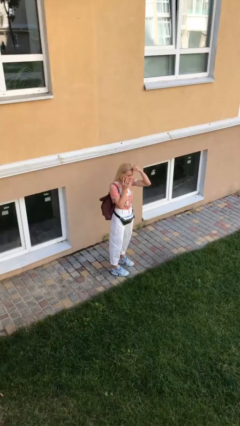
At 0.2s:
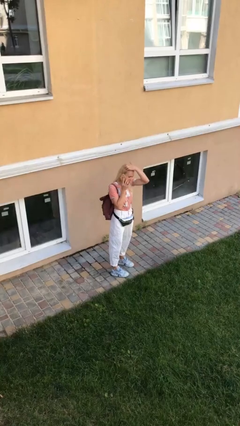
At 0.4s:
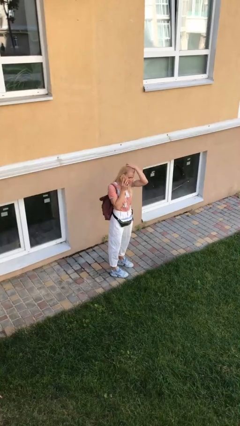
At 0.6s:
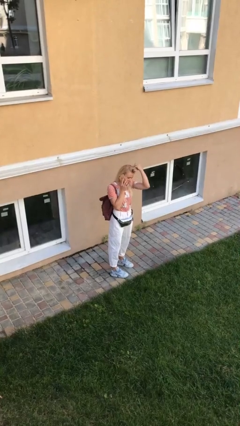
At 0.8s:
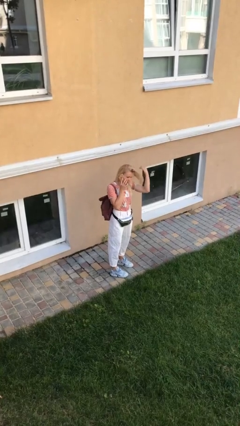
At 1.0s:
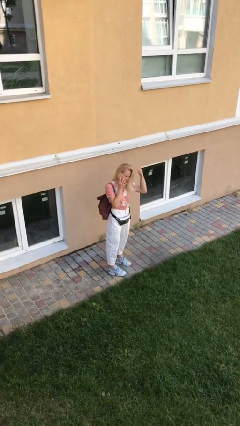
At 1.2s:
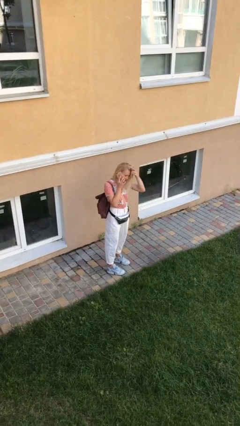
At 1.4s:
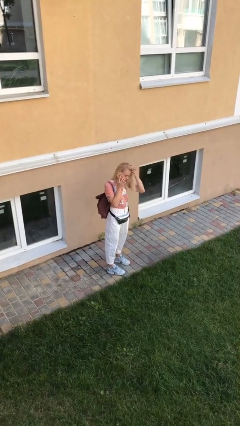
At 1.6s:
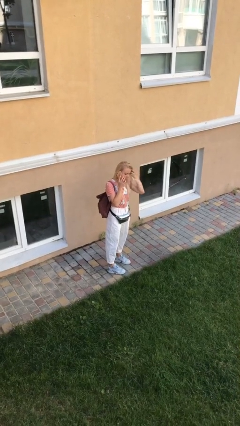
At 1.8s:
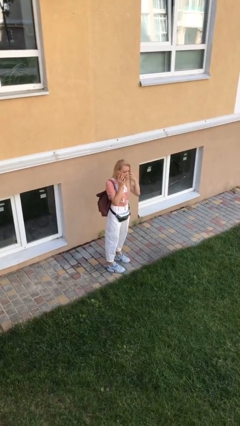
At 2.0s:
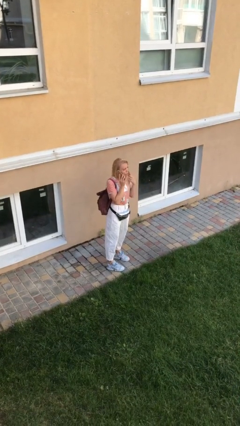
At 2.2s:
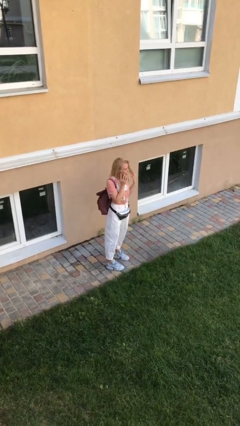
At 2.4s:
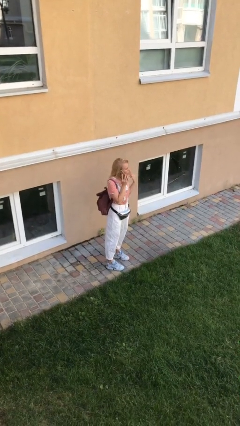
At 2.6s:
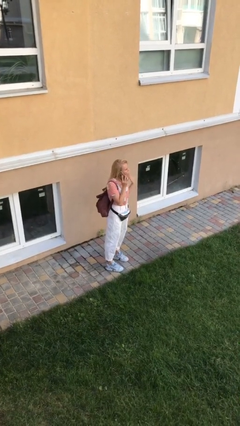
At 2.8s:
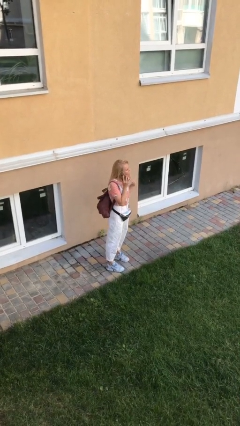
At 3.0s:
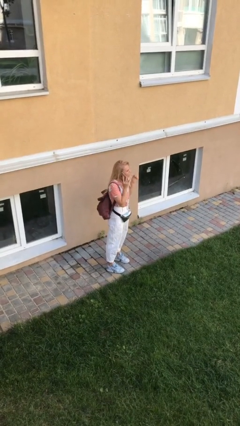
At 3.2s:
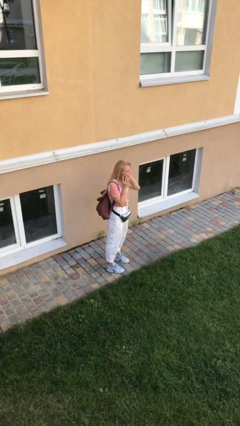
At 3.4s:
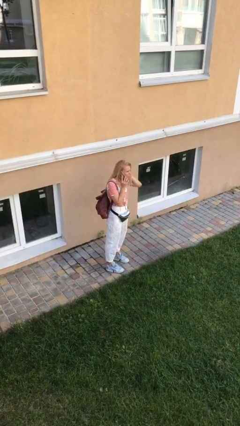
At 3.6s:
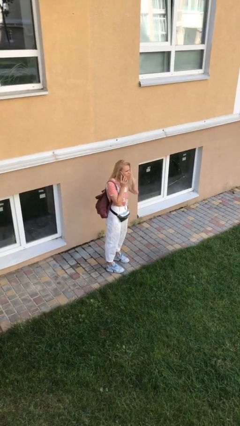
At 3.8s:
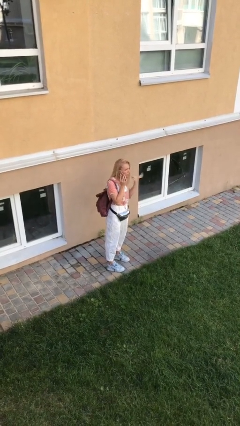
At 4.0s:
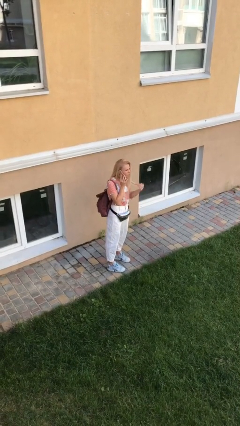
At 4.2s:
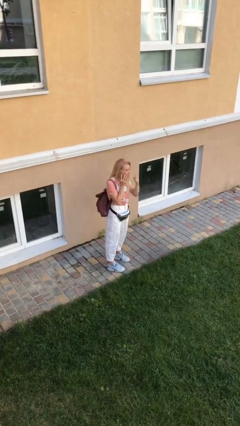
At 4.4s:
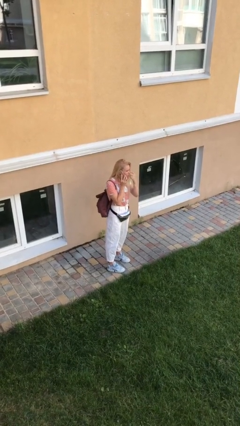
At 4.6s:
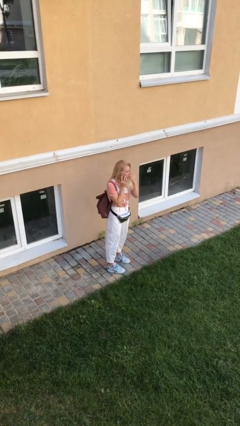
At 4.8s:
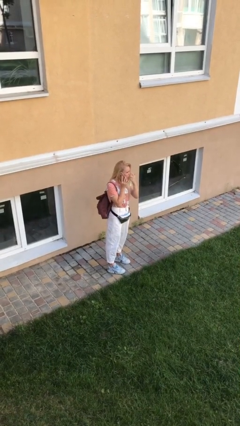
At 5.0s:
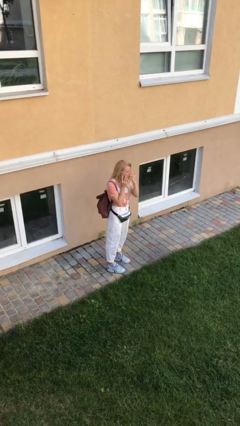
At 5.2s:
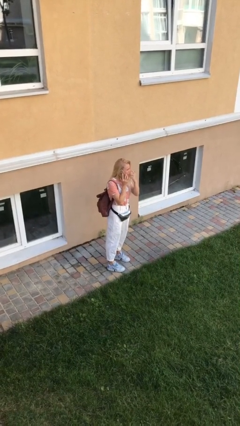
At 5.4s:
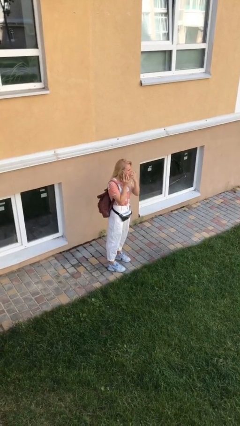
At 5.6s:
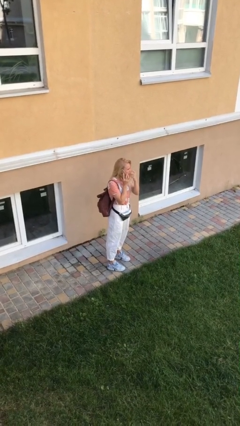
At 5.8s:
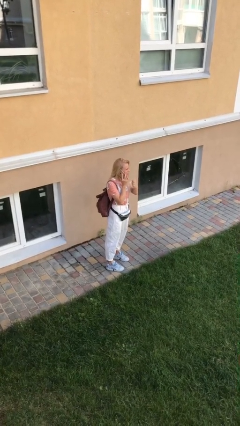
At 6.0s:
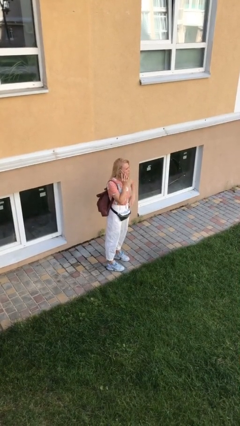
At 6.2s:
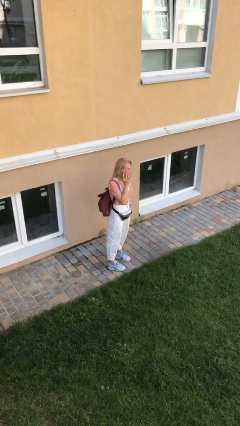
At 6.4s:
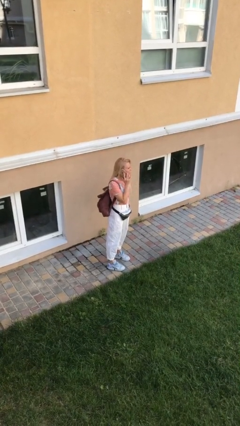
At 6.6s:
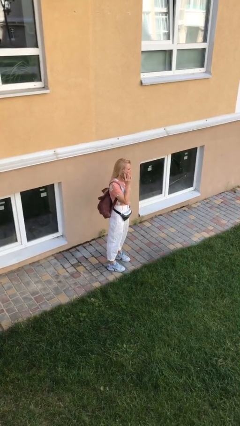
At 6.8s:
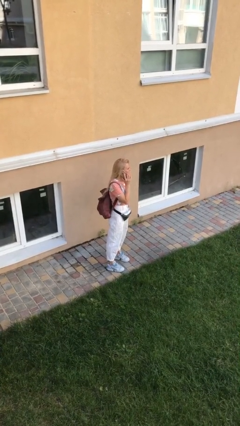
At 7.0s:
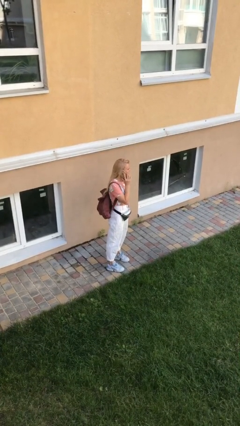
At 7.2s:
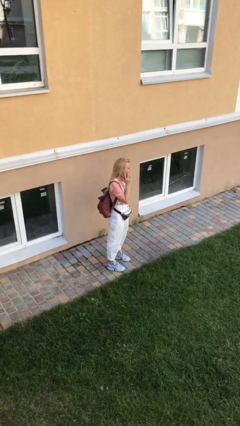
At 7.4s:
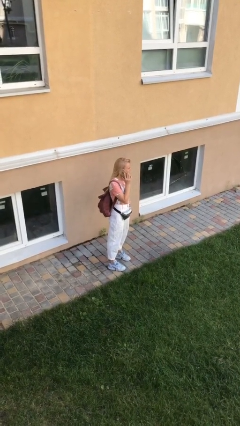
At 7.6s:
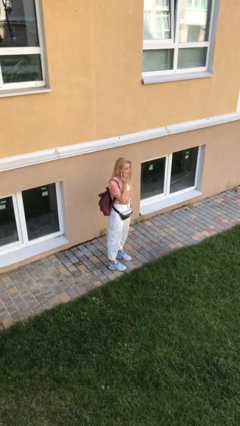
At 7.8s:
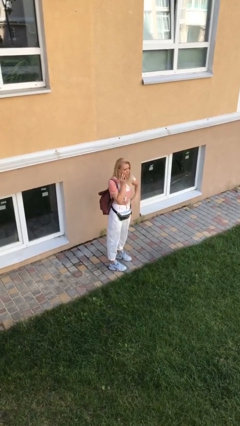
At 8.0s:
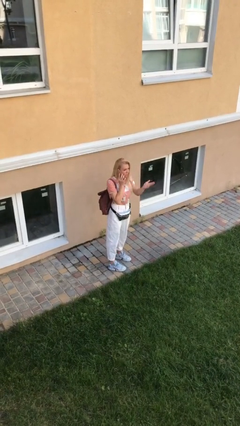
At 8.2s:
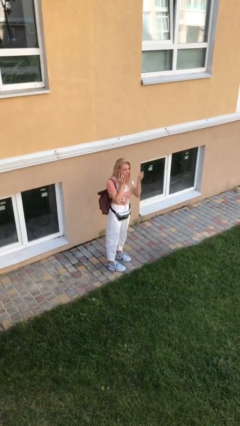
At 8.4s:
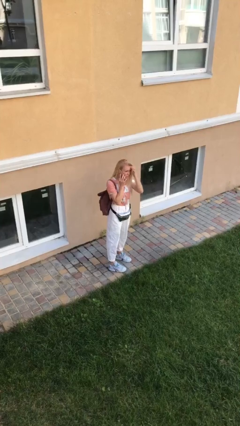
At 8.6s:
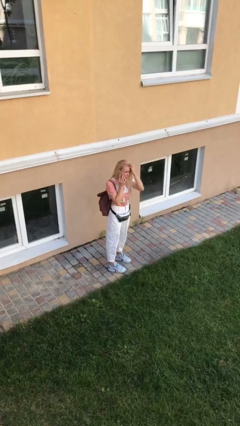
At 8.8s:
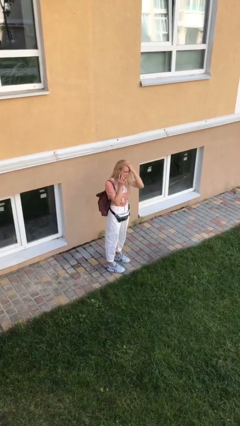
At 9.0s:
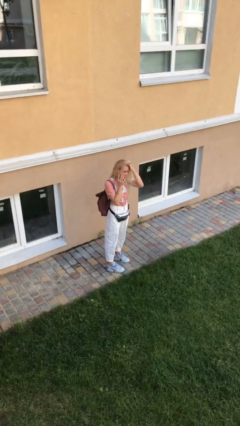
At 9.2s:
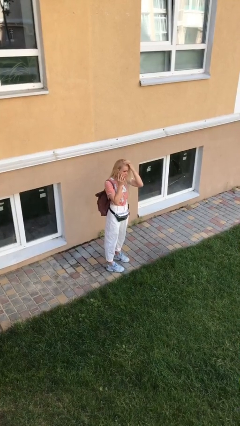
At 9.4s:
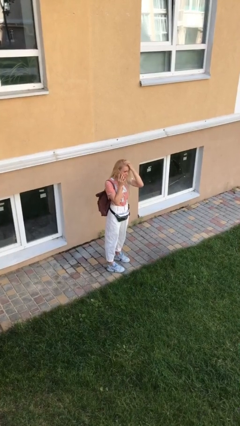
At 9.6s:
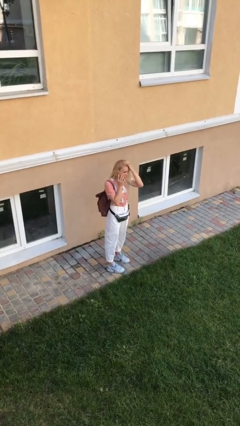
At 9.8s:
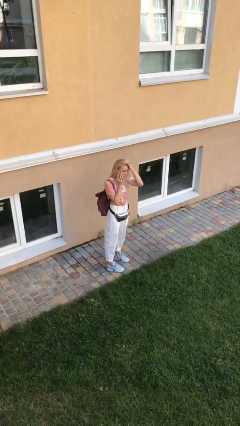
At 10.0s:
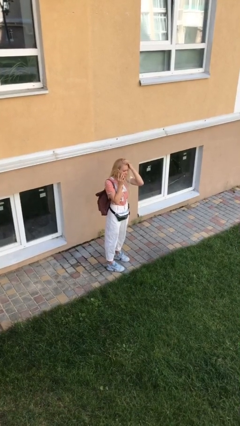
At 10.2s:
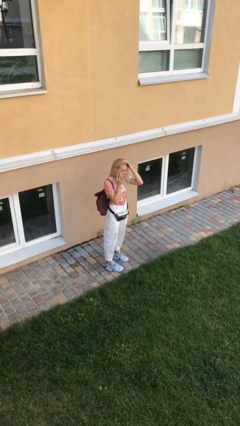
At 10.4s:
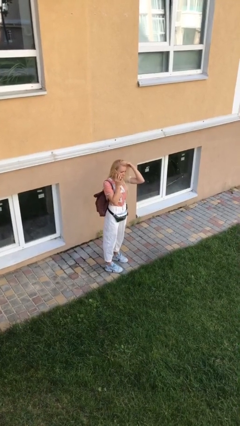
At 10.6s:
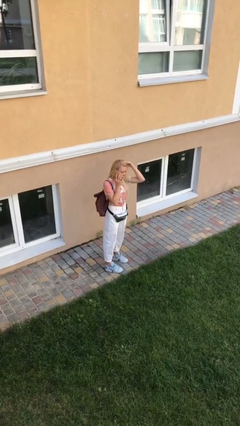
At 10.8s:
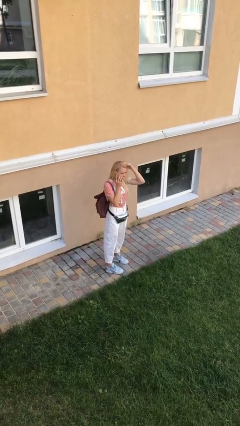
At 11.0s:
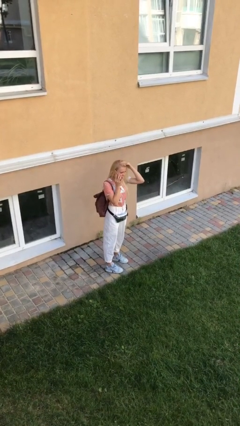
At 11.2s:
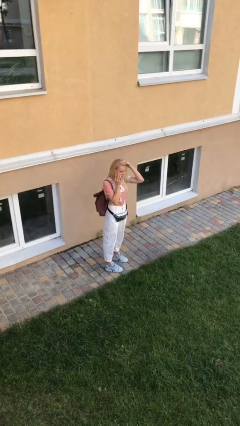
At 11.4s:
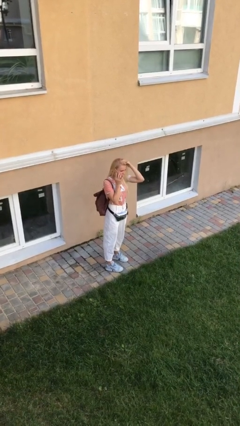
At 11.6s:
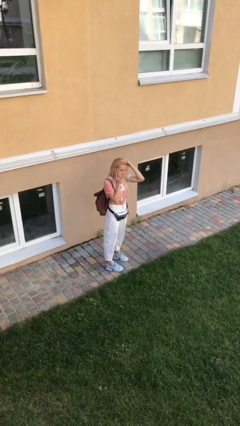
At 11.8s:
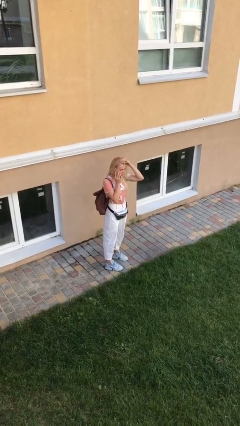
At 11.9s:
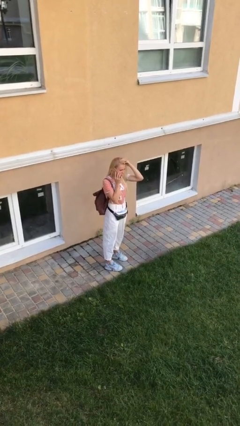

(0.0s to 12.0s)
person talks on phone

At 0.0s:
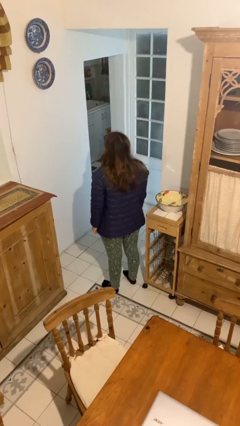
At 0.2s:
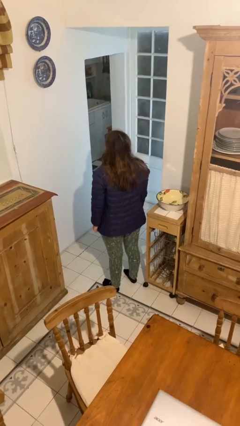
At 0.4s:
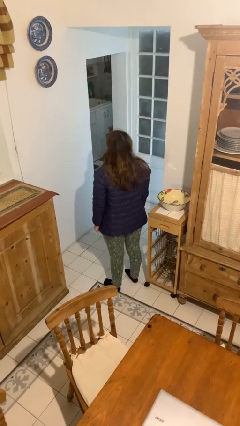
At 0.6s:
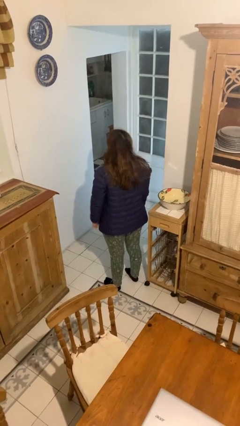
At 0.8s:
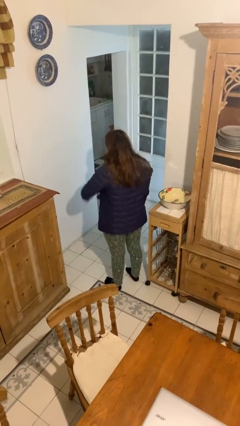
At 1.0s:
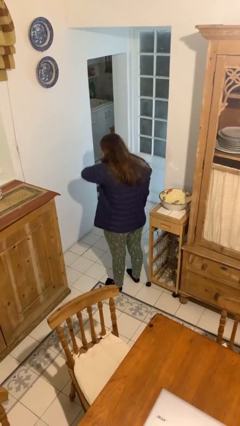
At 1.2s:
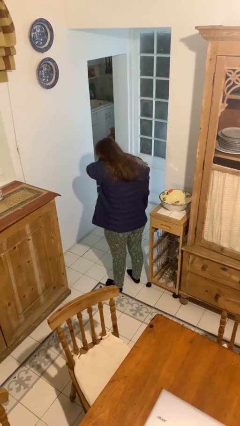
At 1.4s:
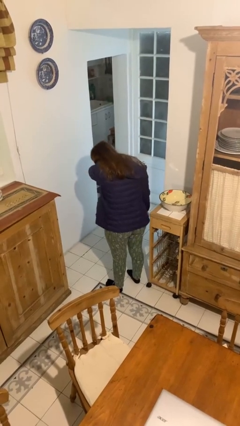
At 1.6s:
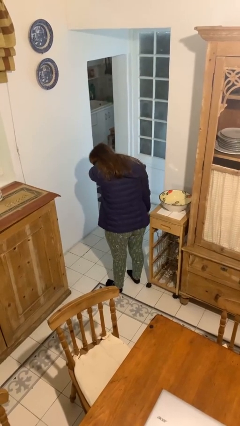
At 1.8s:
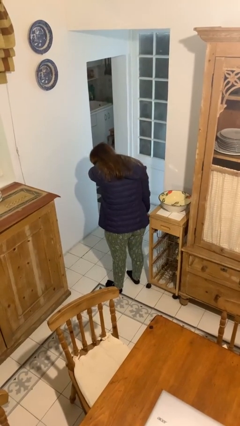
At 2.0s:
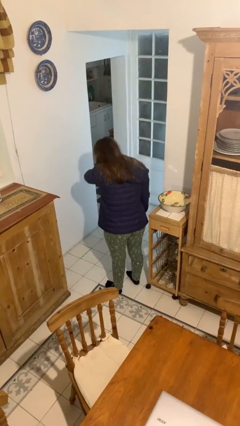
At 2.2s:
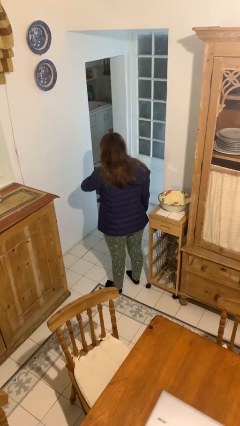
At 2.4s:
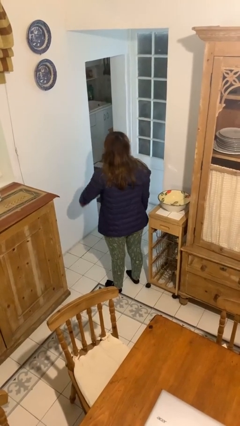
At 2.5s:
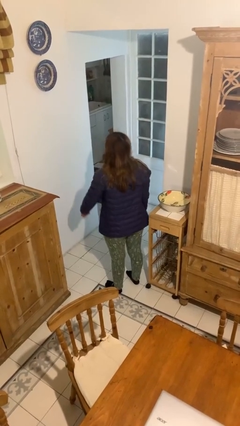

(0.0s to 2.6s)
person sneezes into arm

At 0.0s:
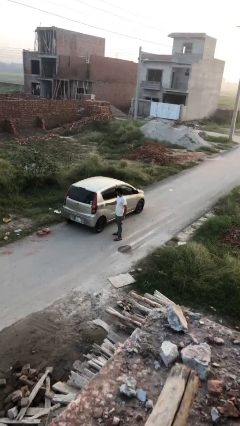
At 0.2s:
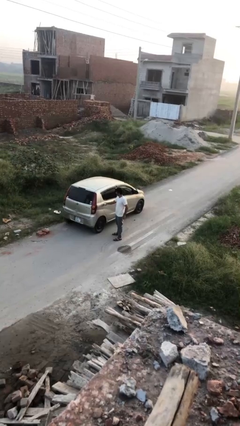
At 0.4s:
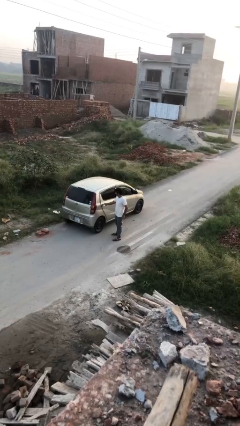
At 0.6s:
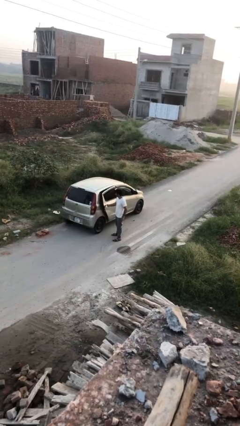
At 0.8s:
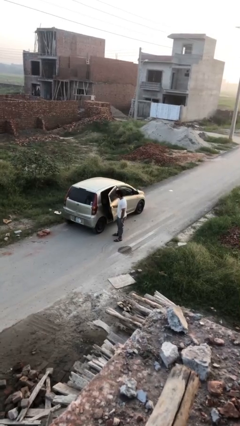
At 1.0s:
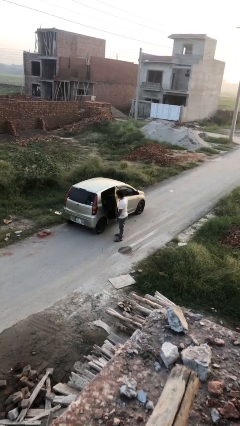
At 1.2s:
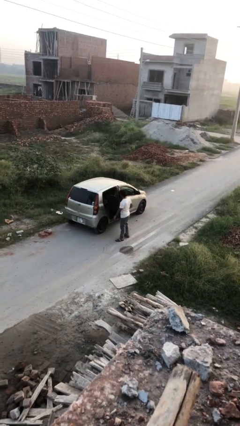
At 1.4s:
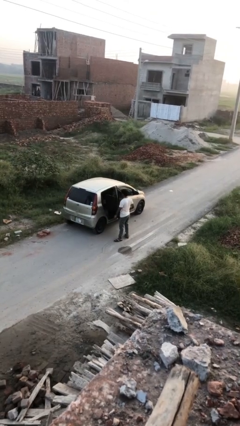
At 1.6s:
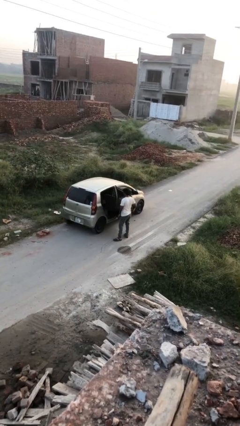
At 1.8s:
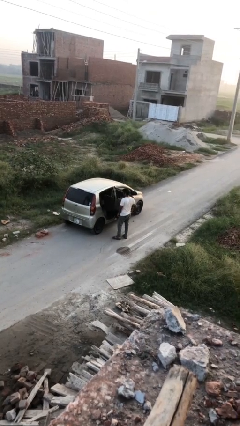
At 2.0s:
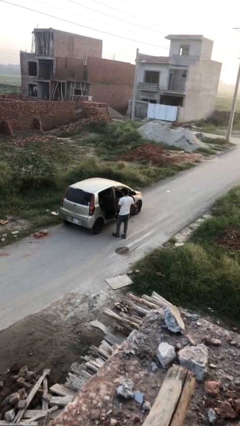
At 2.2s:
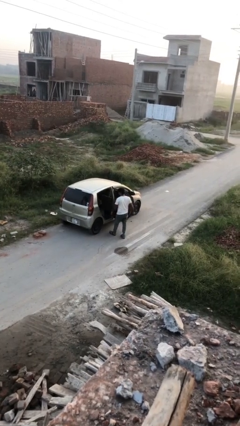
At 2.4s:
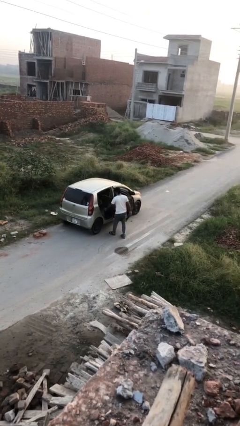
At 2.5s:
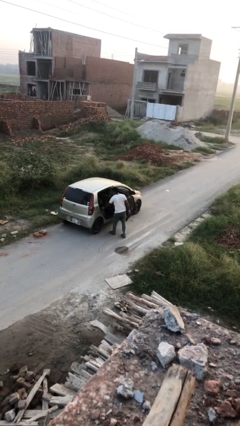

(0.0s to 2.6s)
person opens car door

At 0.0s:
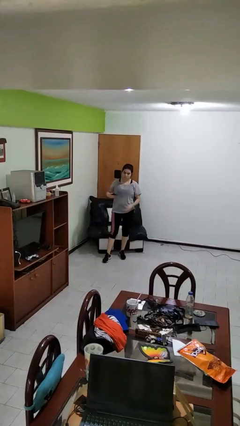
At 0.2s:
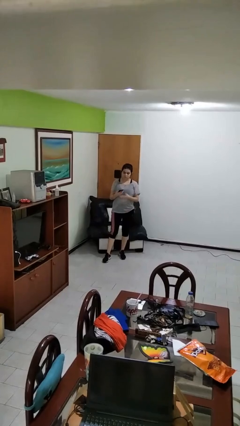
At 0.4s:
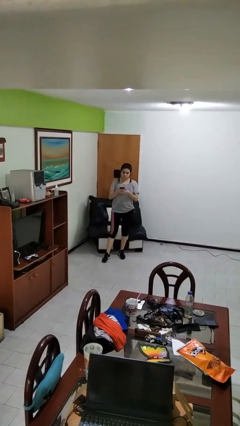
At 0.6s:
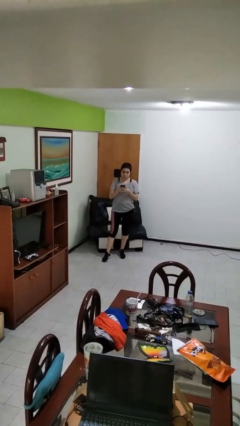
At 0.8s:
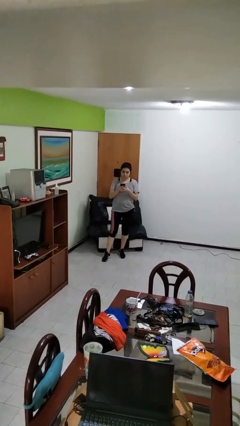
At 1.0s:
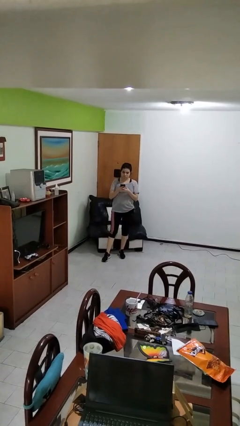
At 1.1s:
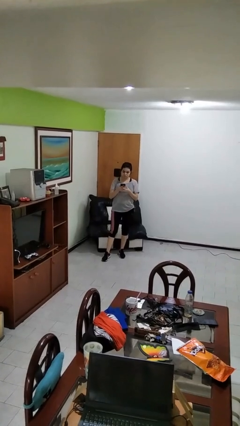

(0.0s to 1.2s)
person takes phone from pocket
